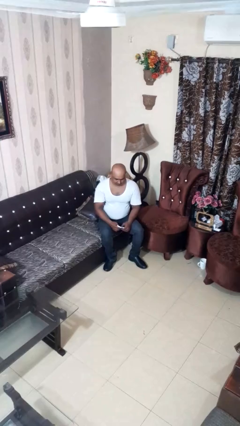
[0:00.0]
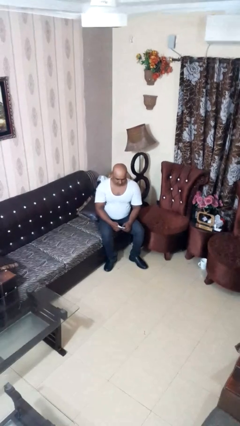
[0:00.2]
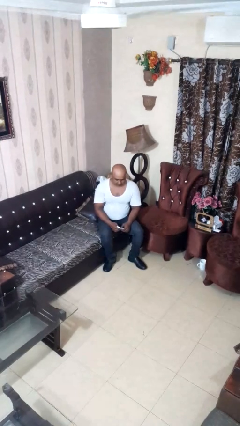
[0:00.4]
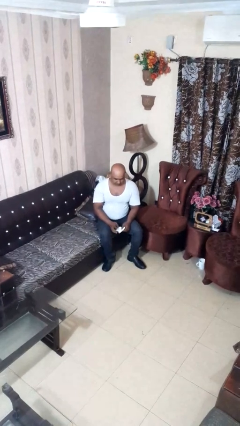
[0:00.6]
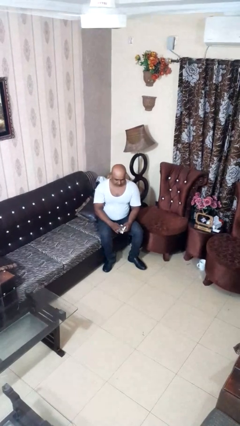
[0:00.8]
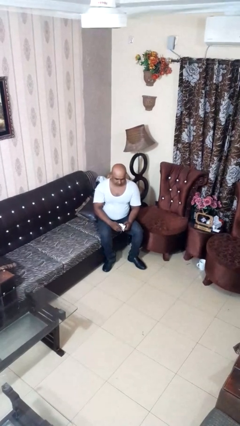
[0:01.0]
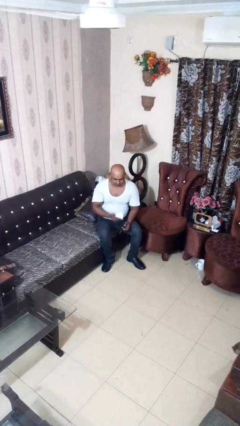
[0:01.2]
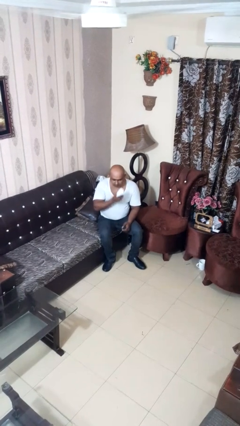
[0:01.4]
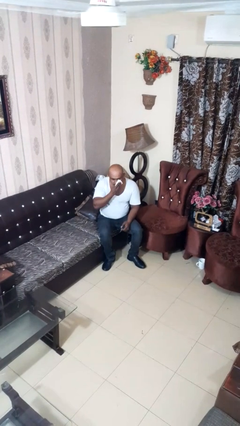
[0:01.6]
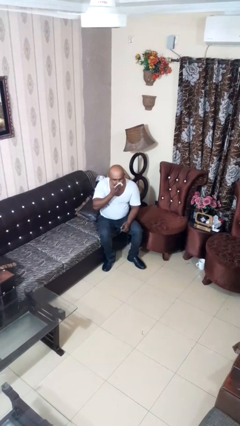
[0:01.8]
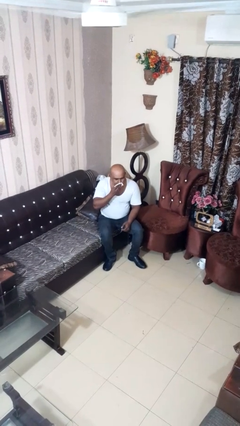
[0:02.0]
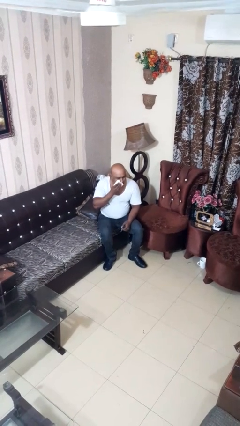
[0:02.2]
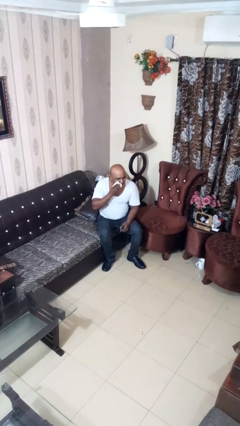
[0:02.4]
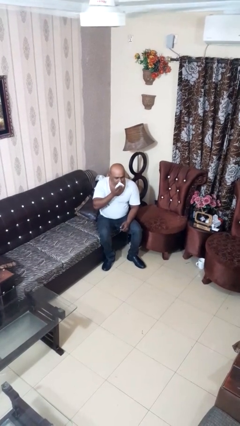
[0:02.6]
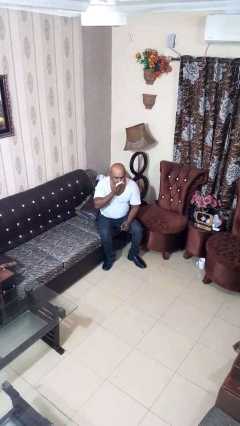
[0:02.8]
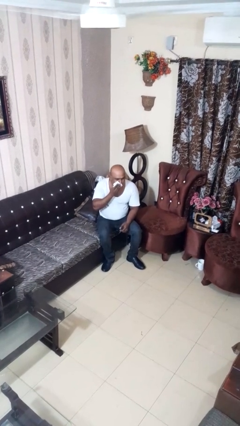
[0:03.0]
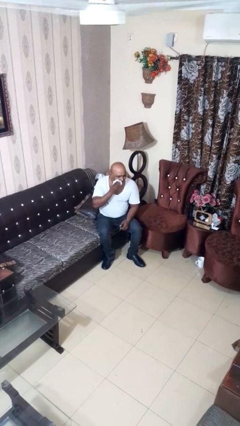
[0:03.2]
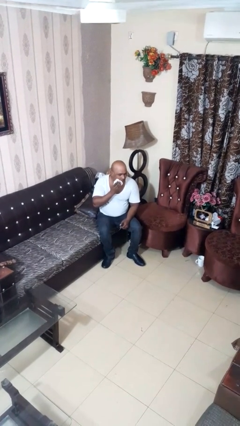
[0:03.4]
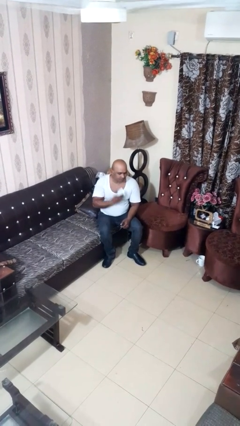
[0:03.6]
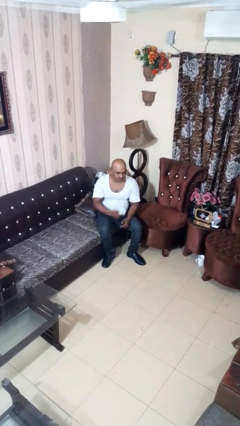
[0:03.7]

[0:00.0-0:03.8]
person wipes mouth with napkin

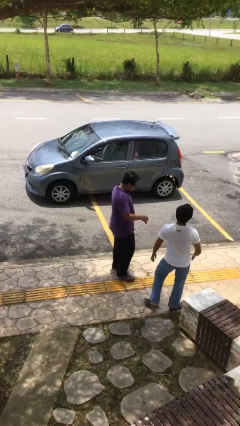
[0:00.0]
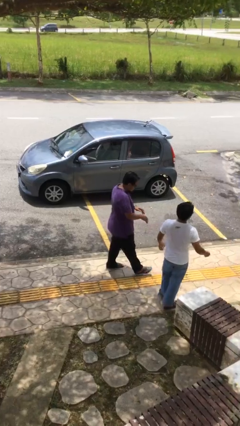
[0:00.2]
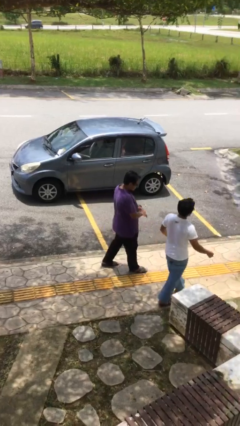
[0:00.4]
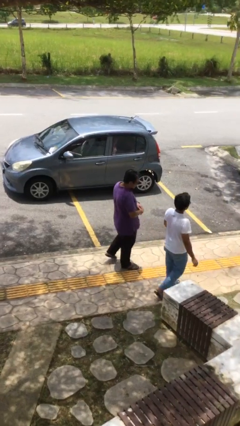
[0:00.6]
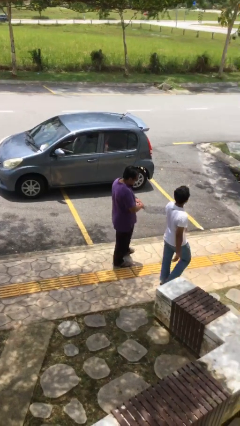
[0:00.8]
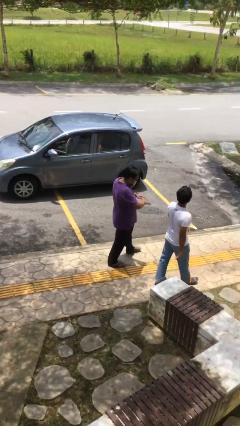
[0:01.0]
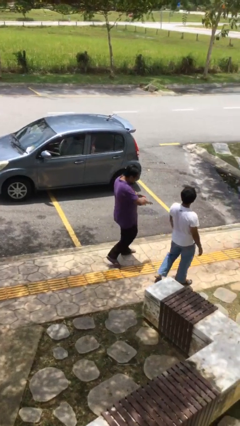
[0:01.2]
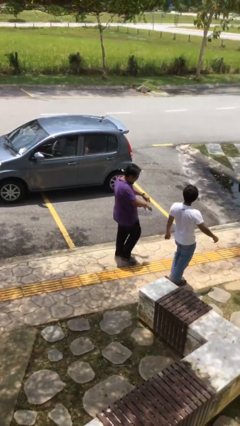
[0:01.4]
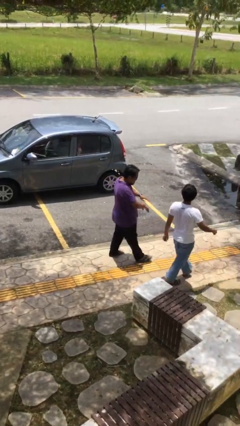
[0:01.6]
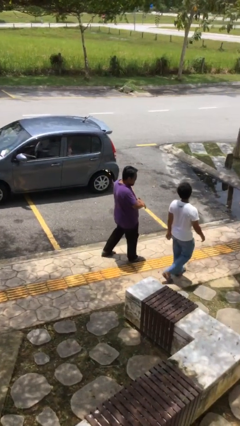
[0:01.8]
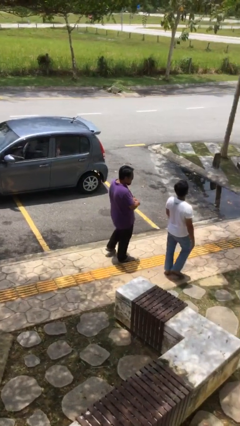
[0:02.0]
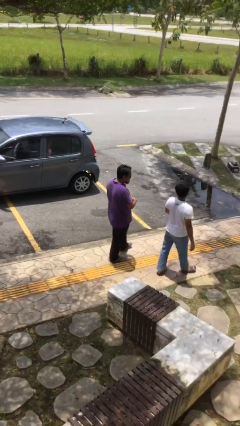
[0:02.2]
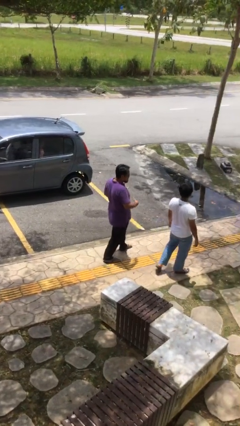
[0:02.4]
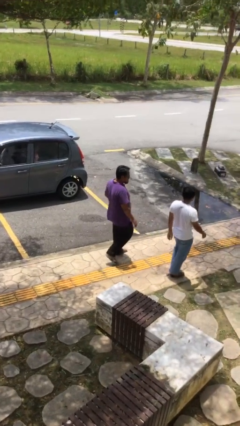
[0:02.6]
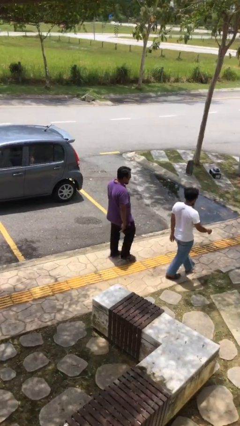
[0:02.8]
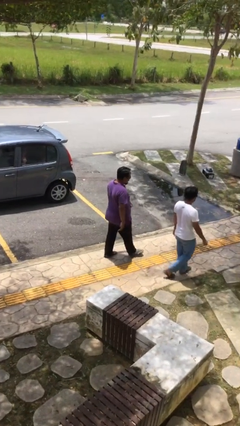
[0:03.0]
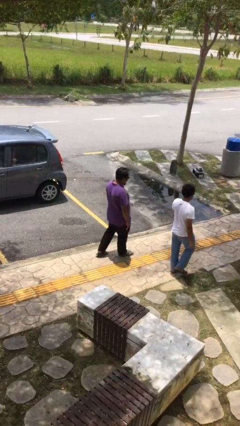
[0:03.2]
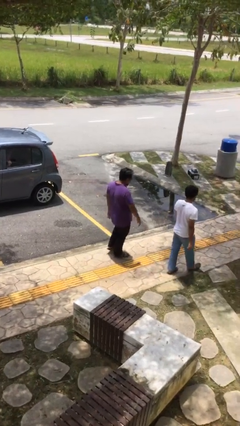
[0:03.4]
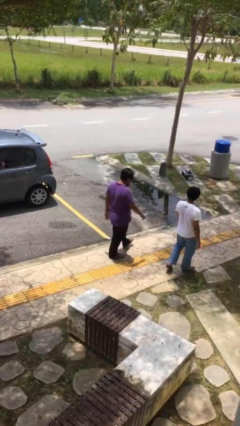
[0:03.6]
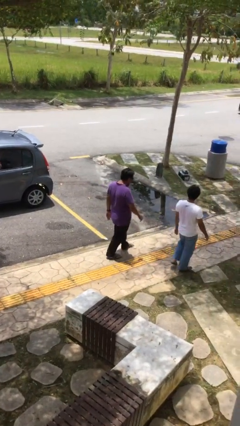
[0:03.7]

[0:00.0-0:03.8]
person talks to person

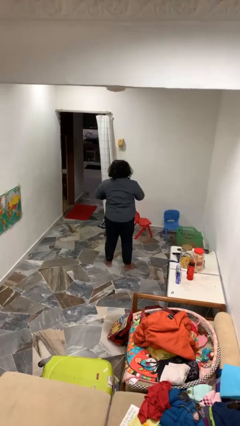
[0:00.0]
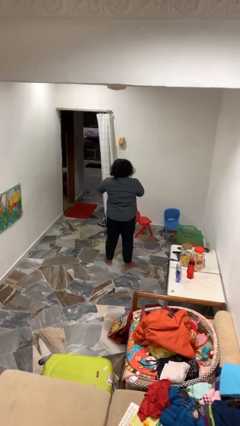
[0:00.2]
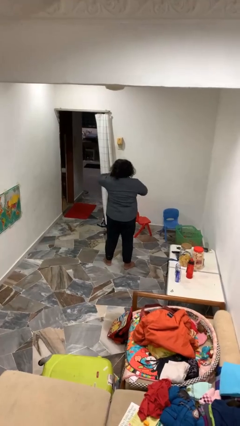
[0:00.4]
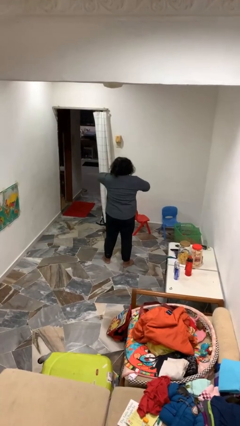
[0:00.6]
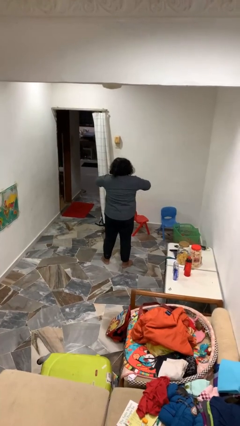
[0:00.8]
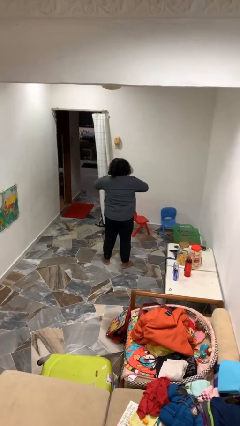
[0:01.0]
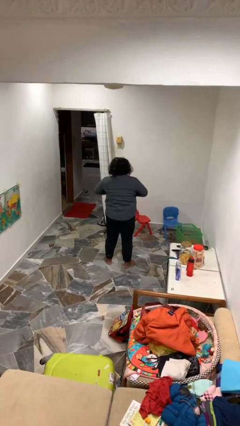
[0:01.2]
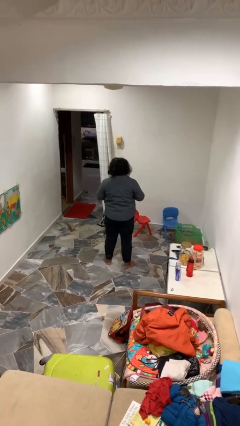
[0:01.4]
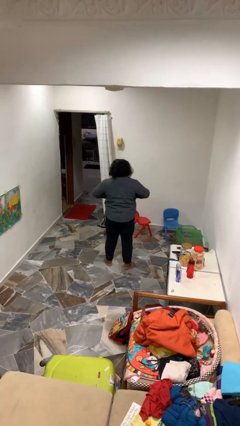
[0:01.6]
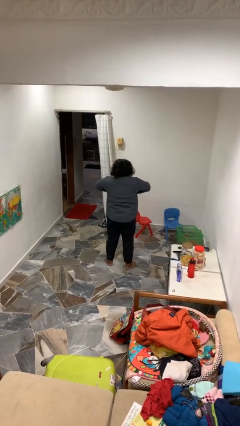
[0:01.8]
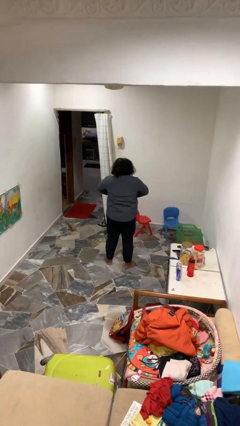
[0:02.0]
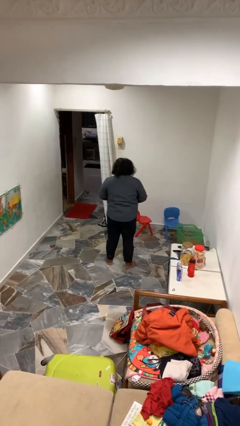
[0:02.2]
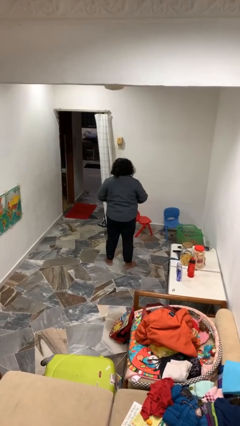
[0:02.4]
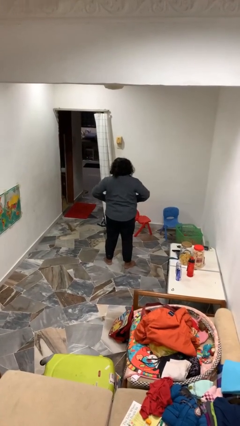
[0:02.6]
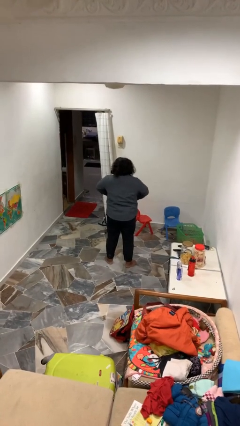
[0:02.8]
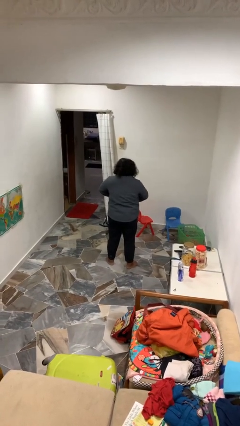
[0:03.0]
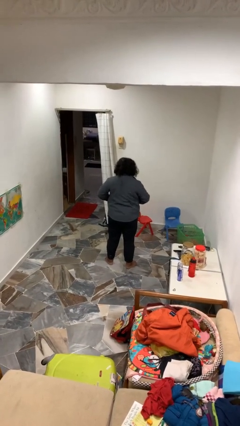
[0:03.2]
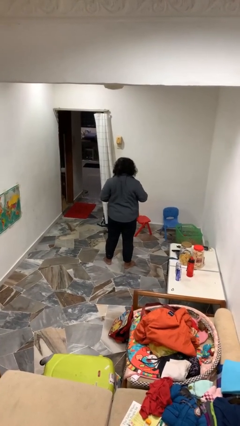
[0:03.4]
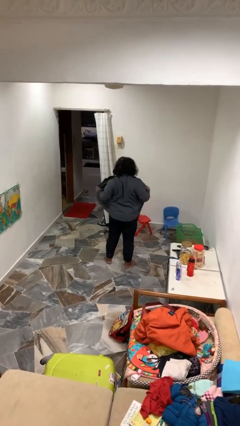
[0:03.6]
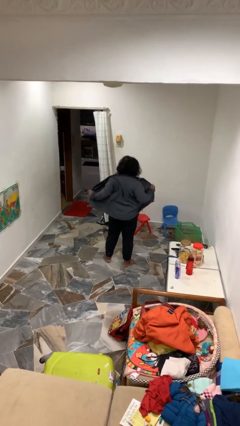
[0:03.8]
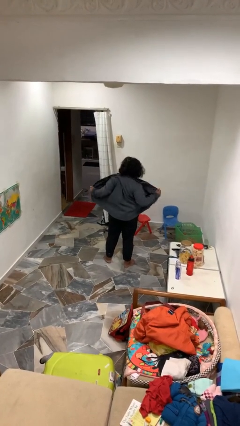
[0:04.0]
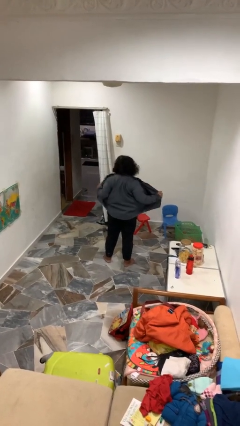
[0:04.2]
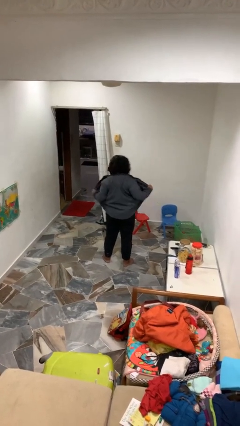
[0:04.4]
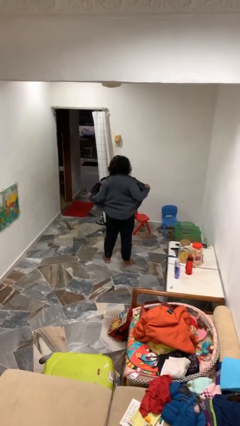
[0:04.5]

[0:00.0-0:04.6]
person unbuttons shirt

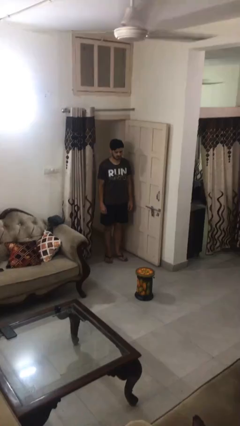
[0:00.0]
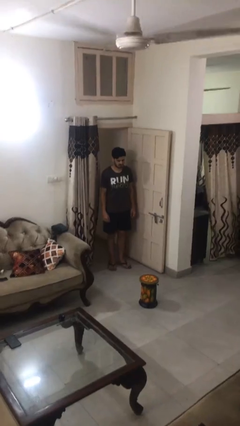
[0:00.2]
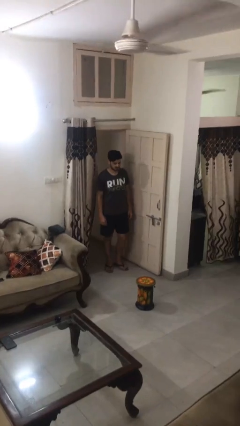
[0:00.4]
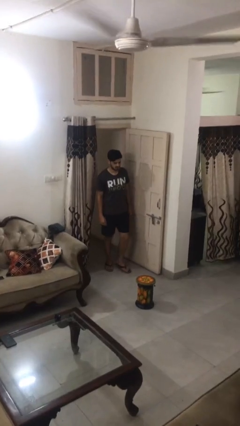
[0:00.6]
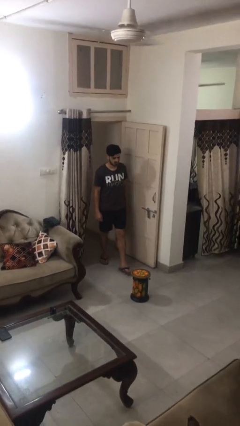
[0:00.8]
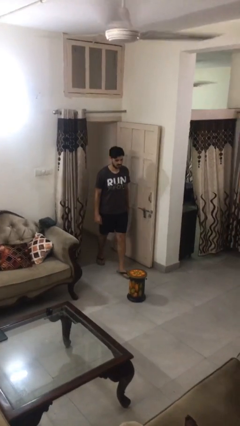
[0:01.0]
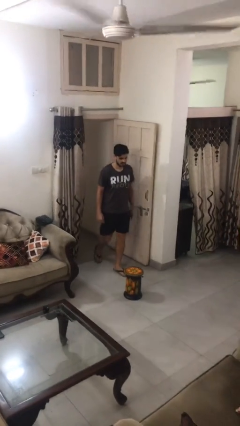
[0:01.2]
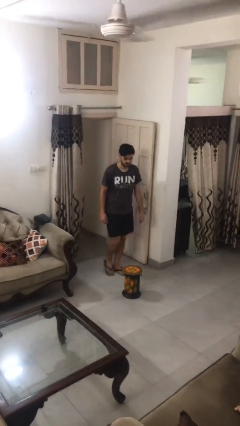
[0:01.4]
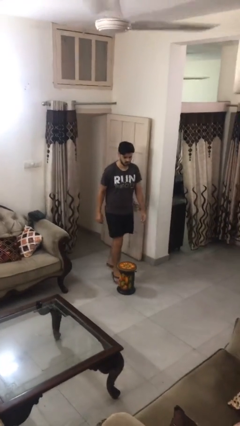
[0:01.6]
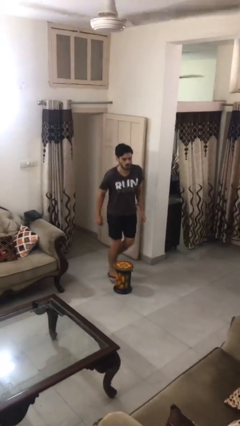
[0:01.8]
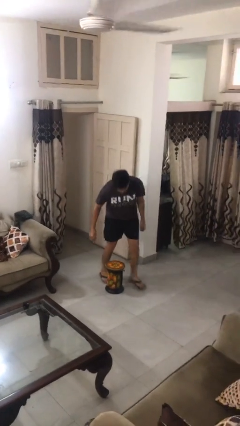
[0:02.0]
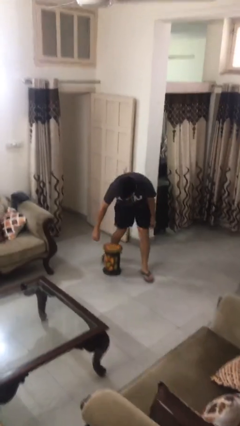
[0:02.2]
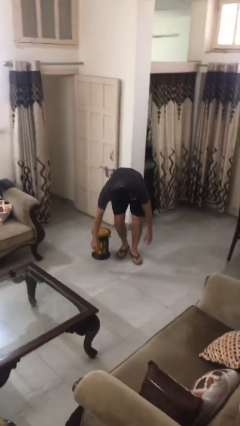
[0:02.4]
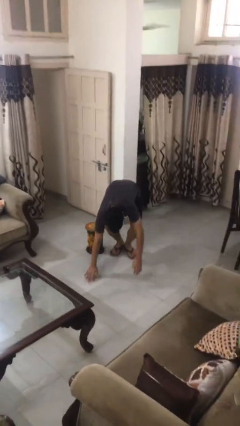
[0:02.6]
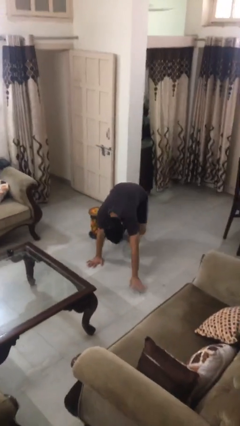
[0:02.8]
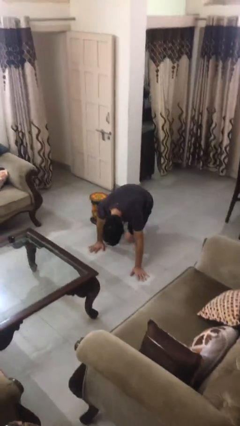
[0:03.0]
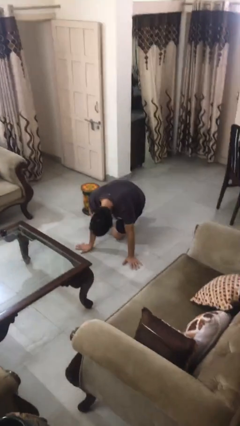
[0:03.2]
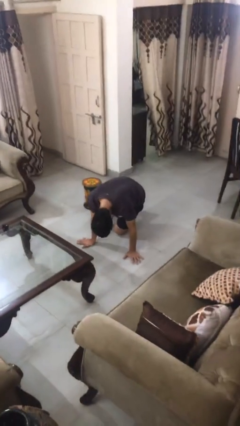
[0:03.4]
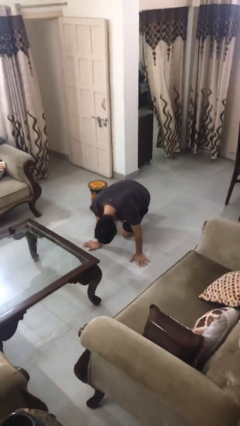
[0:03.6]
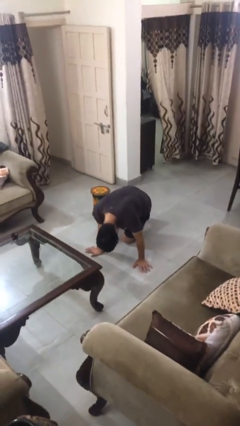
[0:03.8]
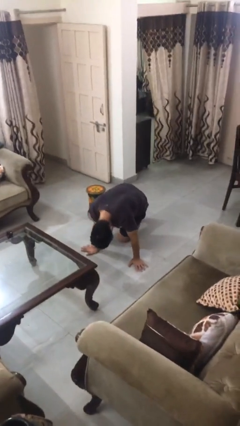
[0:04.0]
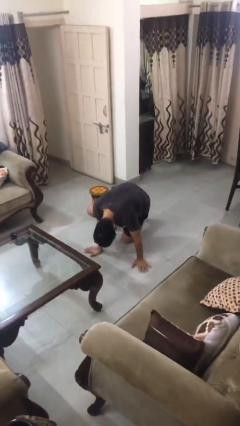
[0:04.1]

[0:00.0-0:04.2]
person trips on object on floor

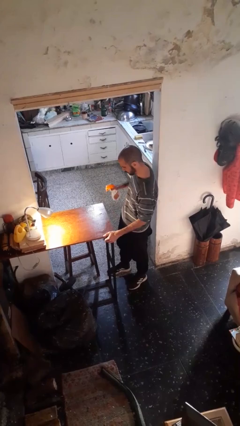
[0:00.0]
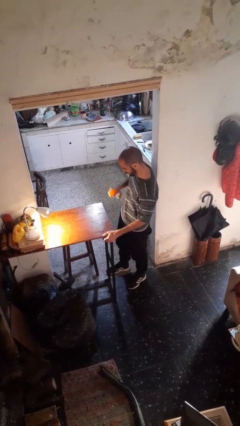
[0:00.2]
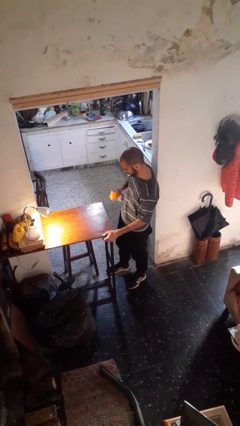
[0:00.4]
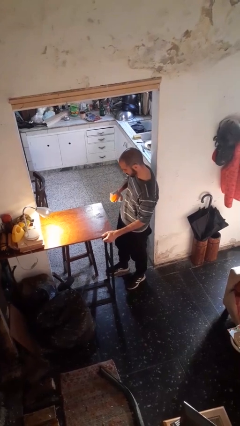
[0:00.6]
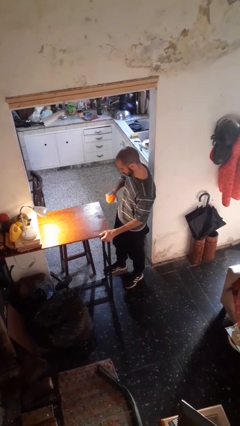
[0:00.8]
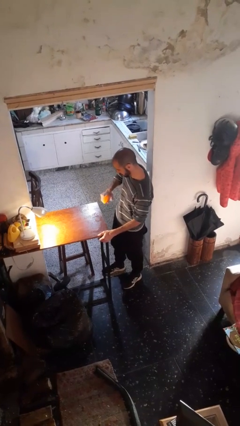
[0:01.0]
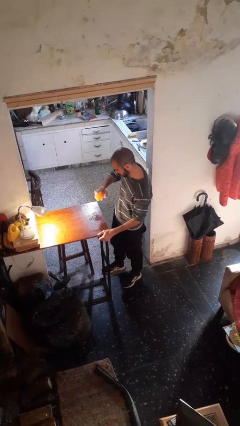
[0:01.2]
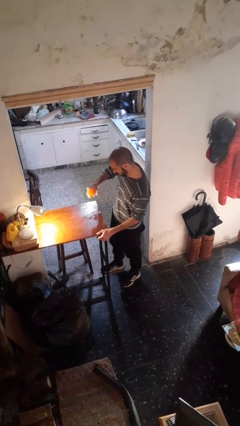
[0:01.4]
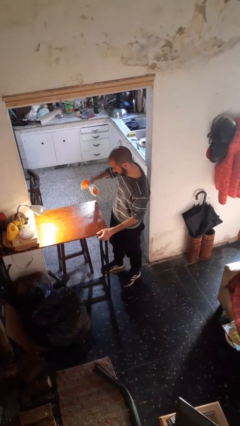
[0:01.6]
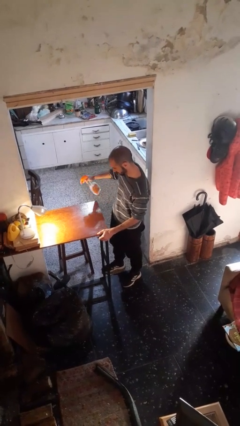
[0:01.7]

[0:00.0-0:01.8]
person sprays from bottle
